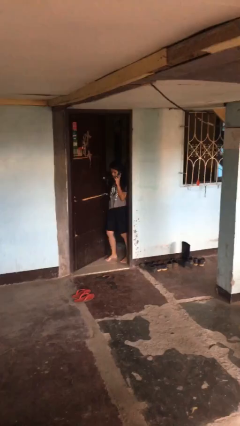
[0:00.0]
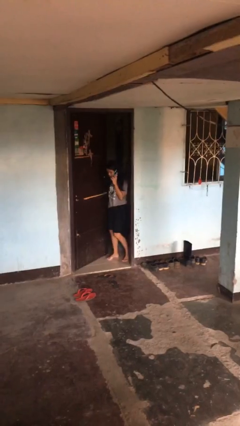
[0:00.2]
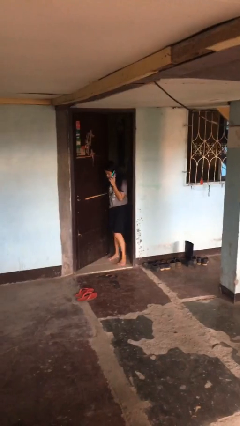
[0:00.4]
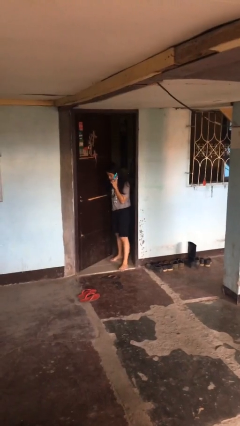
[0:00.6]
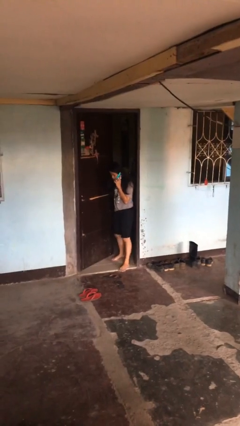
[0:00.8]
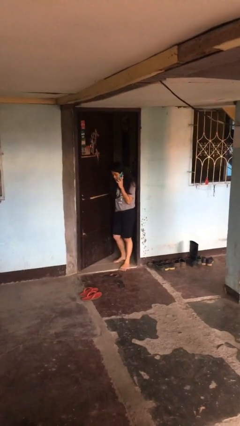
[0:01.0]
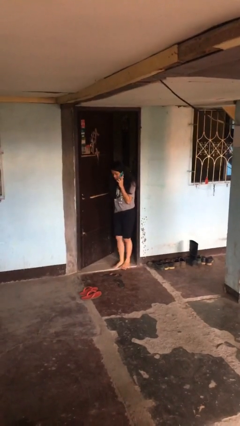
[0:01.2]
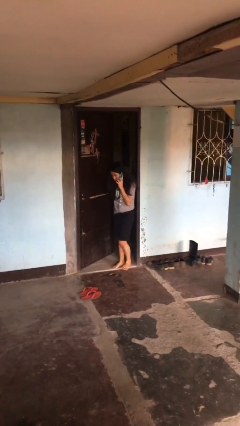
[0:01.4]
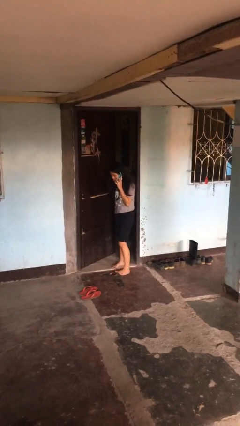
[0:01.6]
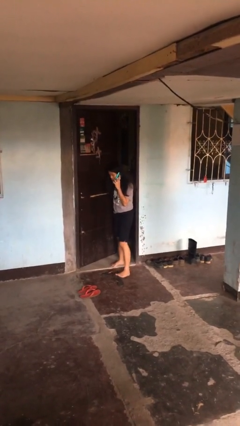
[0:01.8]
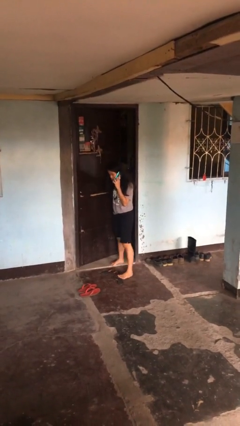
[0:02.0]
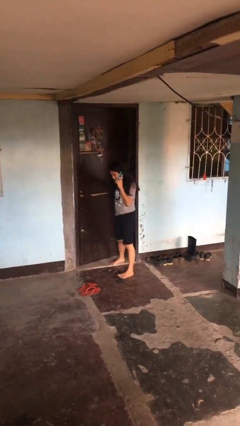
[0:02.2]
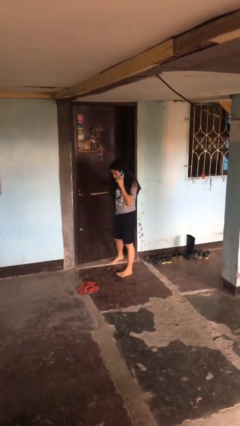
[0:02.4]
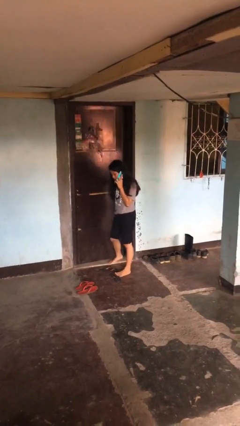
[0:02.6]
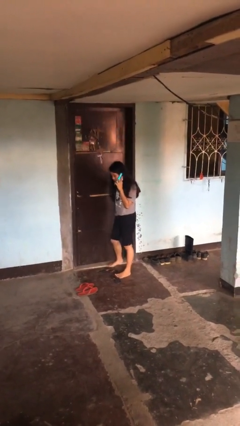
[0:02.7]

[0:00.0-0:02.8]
person enters scene through structure

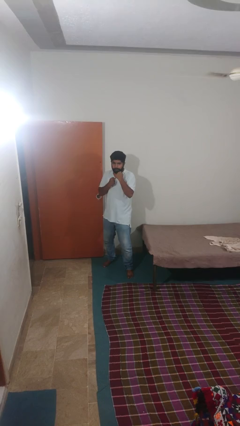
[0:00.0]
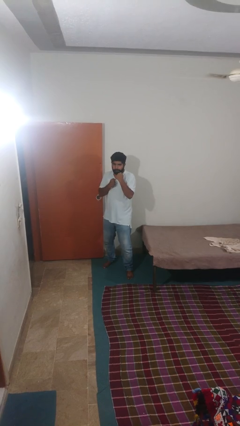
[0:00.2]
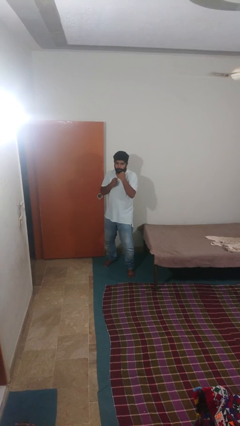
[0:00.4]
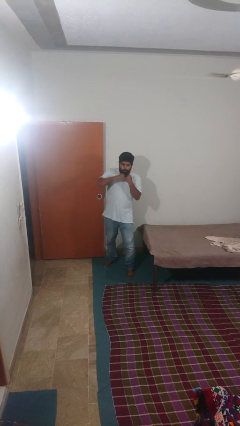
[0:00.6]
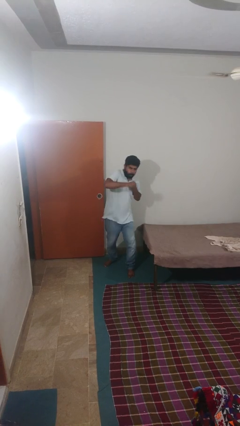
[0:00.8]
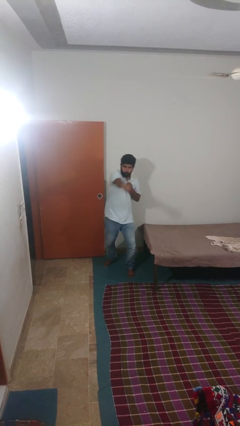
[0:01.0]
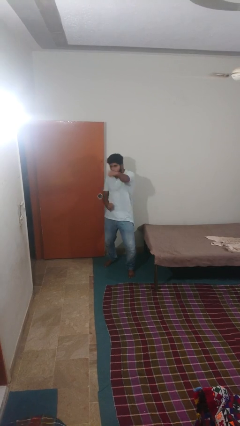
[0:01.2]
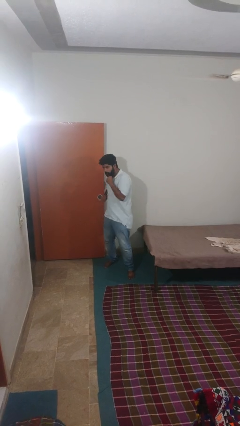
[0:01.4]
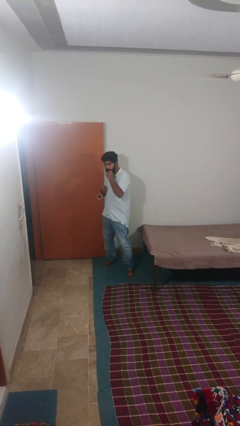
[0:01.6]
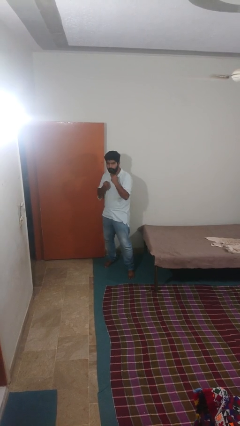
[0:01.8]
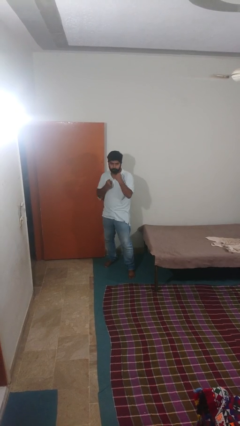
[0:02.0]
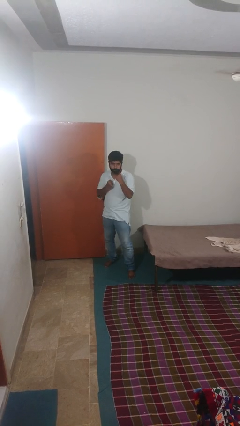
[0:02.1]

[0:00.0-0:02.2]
person punches

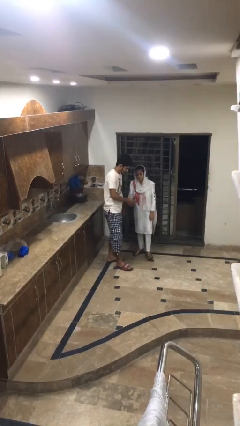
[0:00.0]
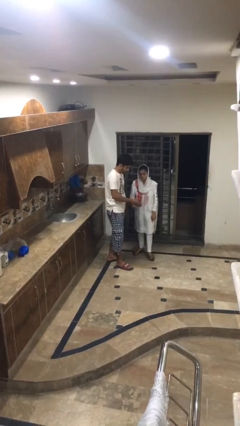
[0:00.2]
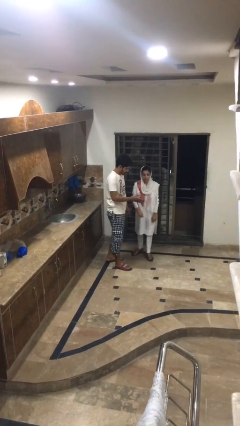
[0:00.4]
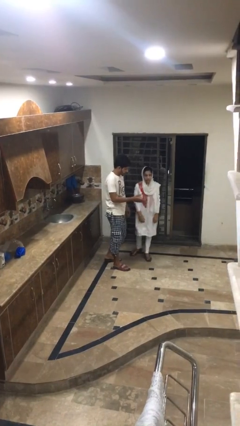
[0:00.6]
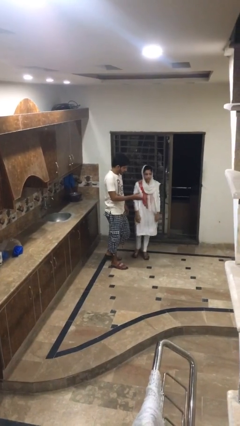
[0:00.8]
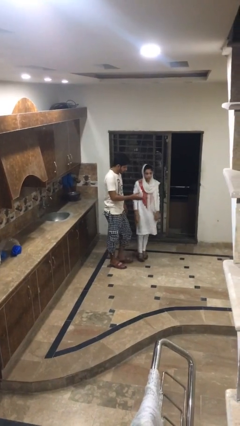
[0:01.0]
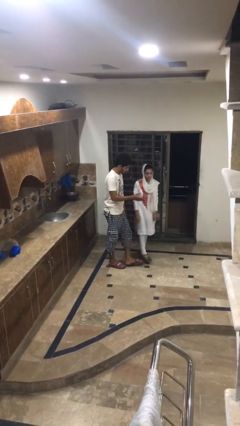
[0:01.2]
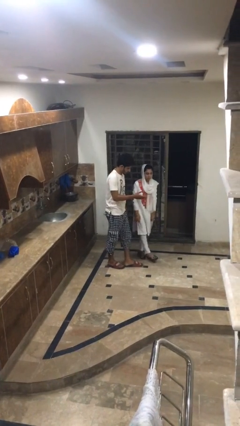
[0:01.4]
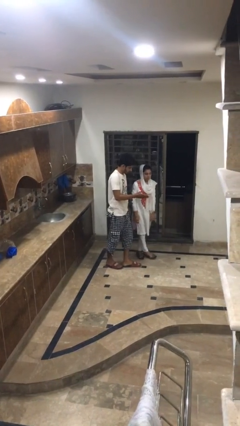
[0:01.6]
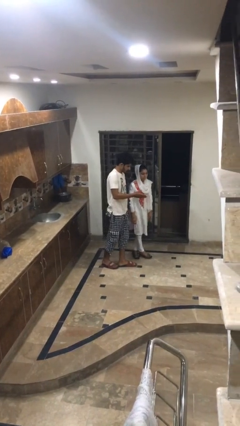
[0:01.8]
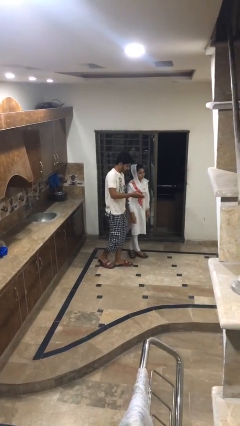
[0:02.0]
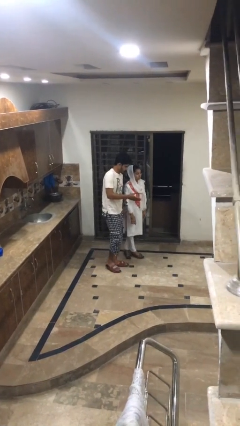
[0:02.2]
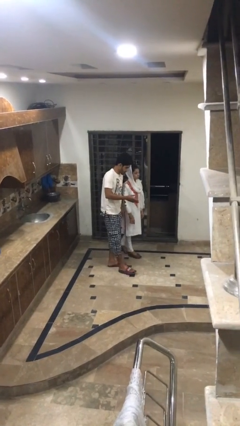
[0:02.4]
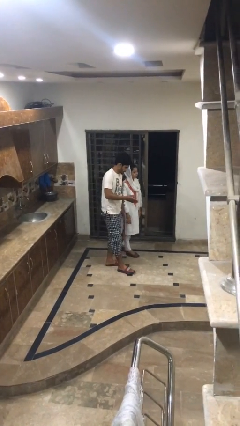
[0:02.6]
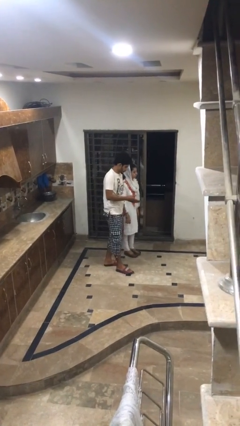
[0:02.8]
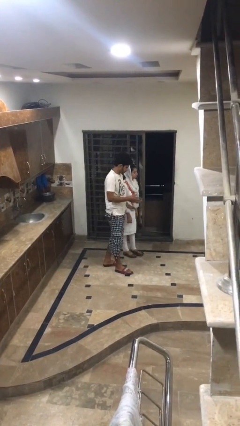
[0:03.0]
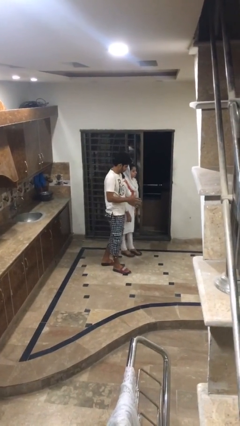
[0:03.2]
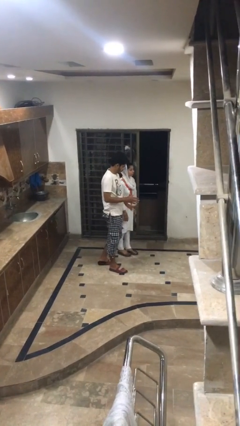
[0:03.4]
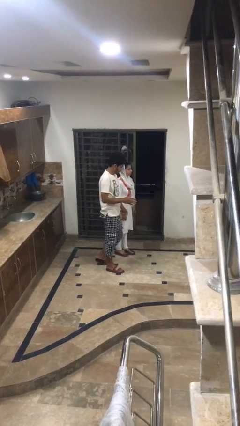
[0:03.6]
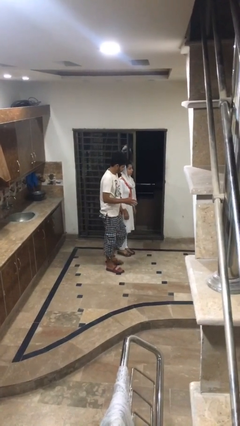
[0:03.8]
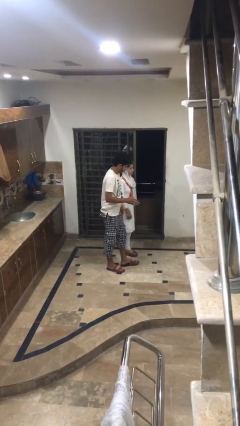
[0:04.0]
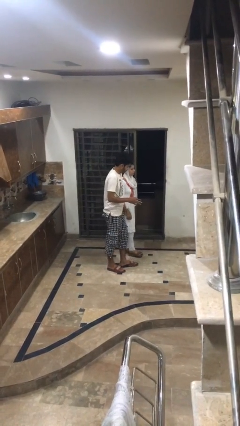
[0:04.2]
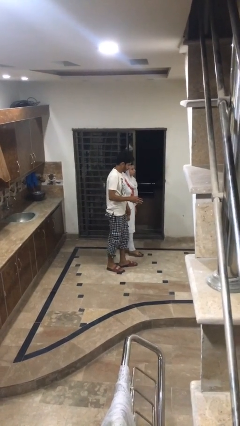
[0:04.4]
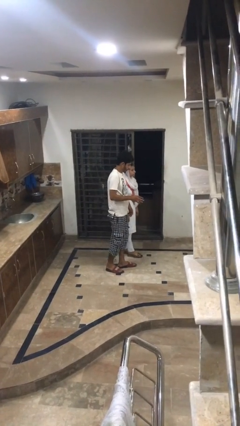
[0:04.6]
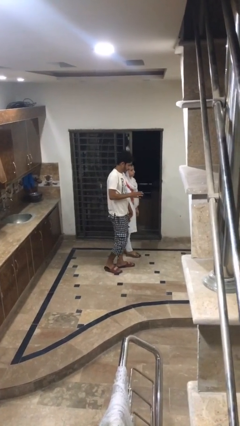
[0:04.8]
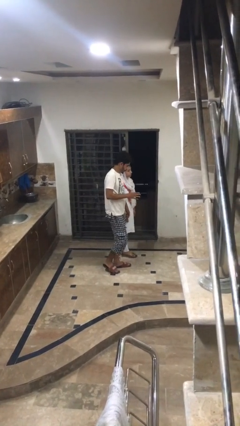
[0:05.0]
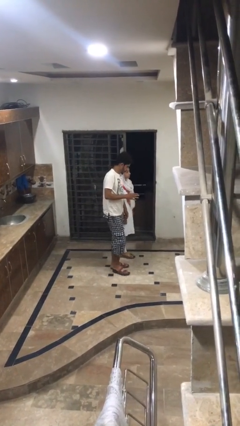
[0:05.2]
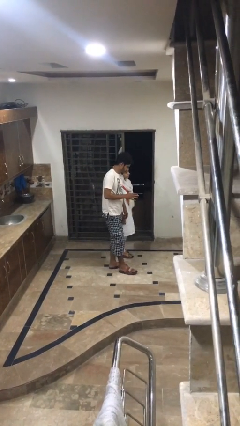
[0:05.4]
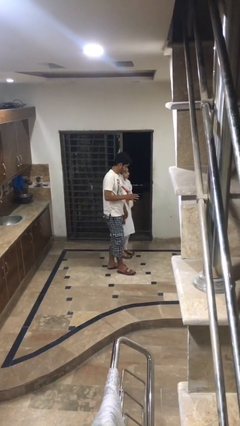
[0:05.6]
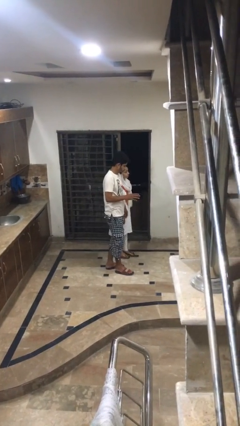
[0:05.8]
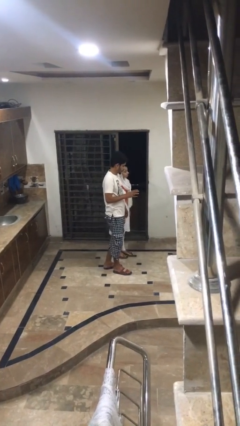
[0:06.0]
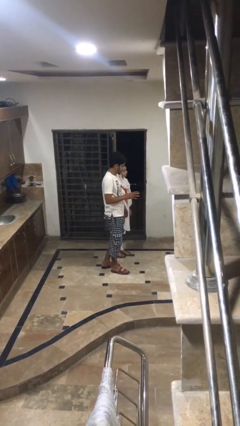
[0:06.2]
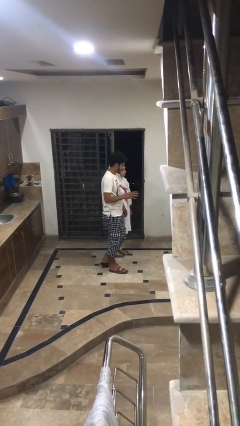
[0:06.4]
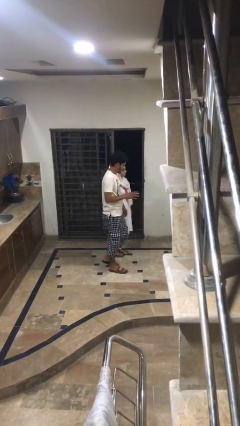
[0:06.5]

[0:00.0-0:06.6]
person talks to person

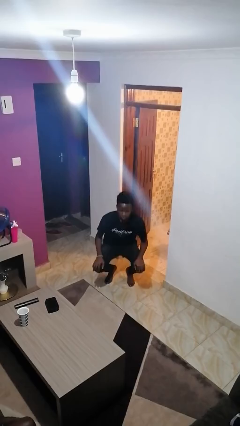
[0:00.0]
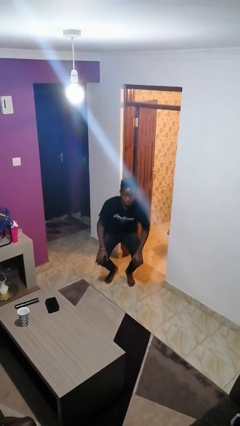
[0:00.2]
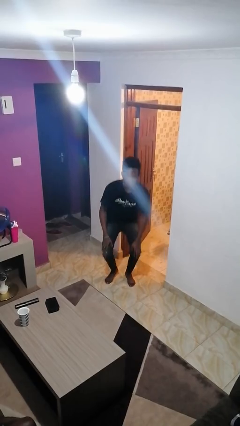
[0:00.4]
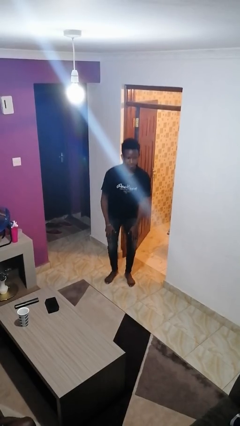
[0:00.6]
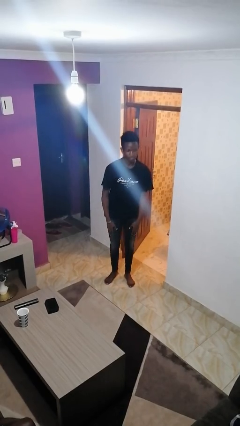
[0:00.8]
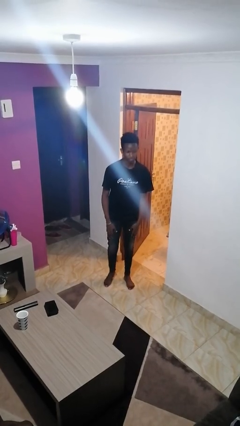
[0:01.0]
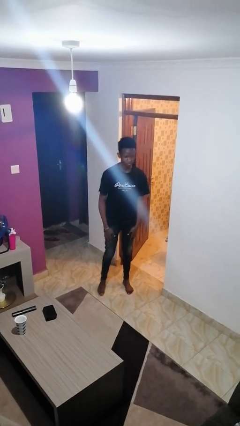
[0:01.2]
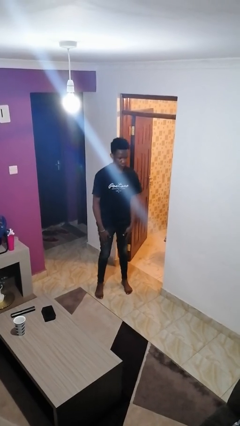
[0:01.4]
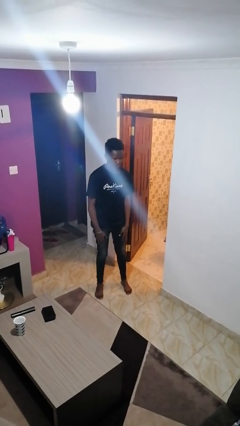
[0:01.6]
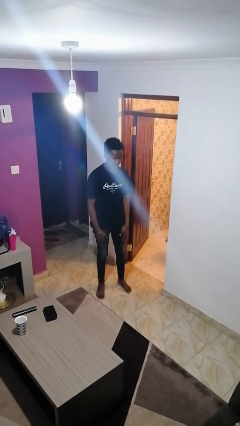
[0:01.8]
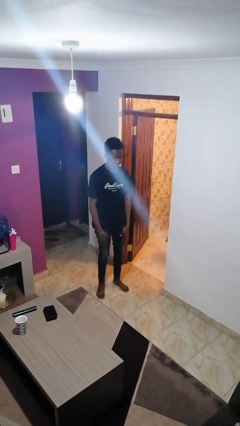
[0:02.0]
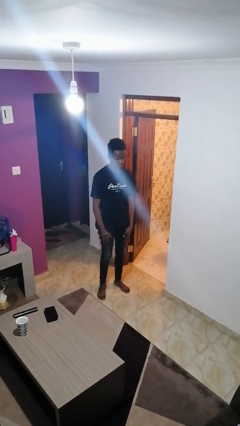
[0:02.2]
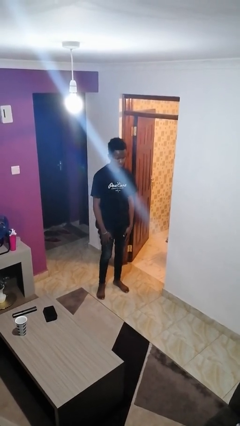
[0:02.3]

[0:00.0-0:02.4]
person stands up

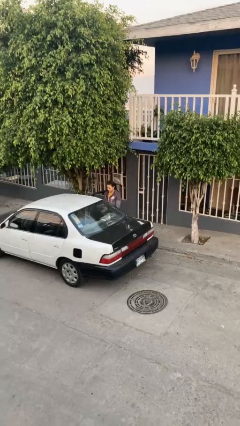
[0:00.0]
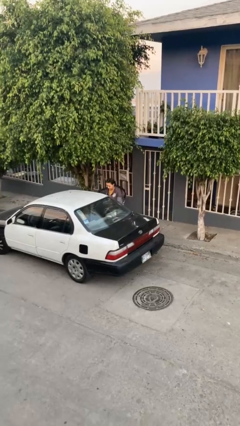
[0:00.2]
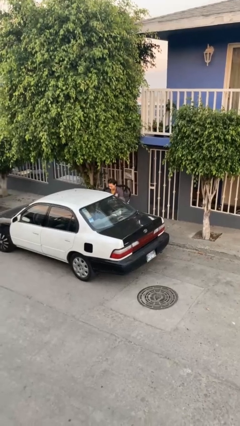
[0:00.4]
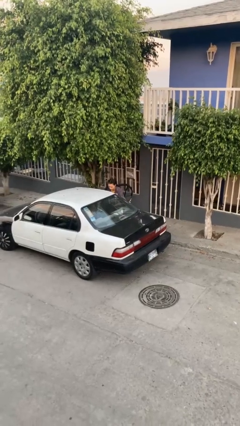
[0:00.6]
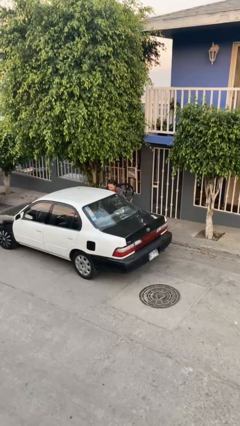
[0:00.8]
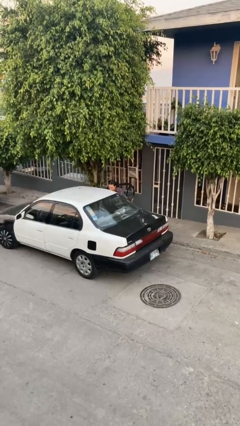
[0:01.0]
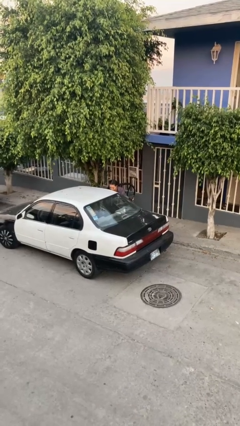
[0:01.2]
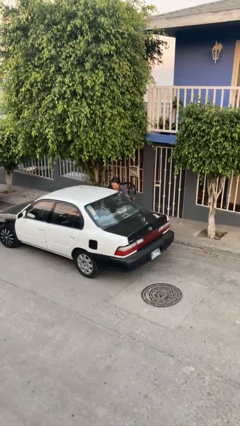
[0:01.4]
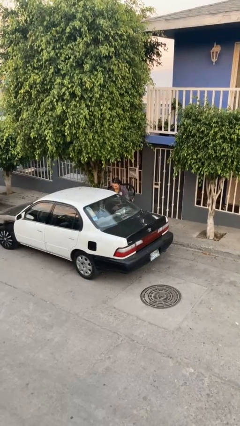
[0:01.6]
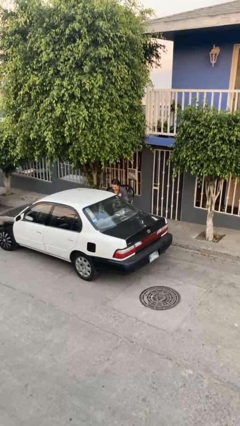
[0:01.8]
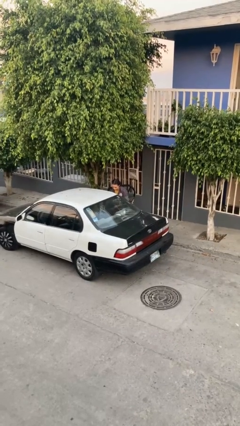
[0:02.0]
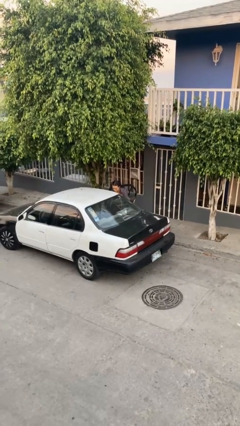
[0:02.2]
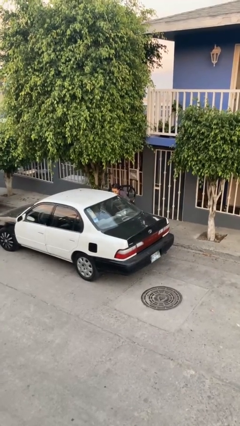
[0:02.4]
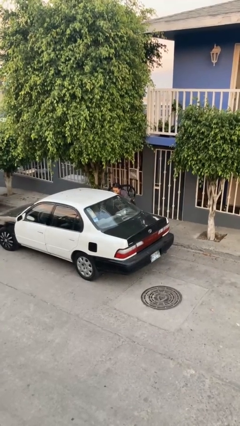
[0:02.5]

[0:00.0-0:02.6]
person loads car

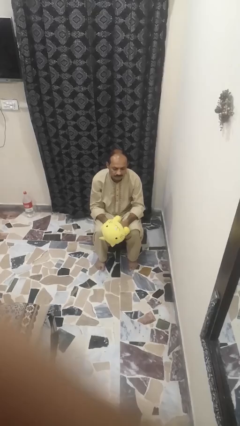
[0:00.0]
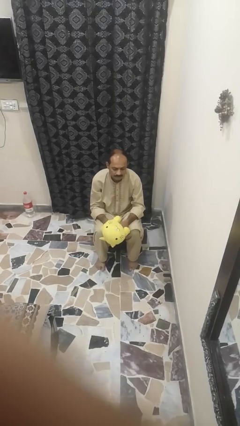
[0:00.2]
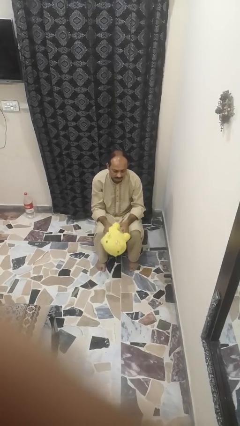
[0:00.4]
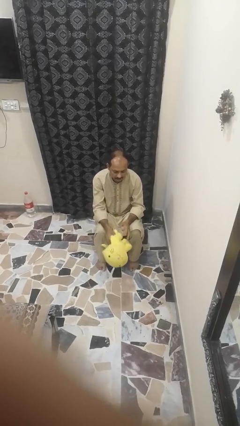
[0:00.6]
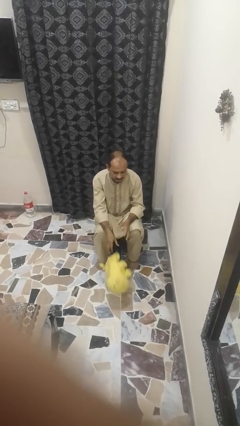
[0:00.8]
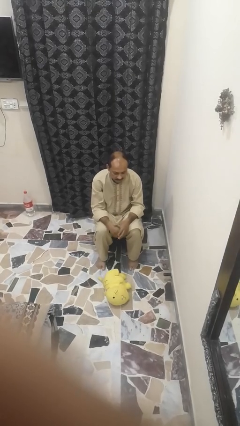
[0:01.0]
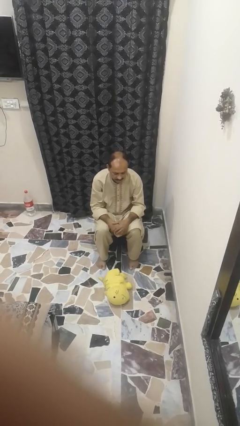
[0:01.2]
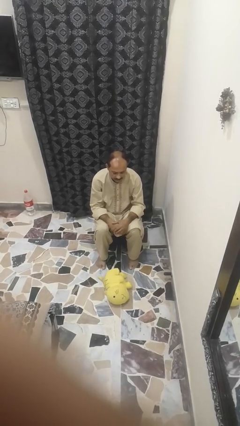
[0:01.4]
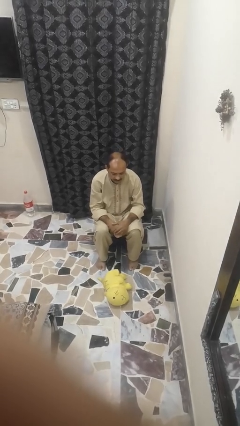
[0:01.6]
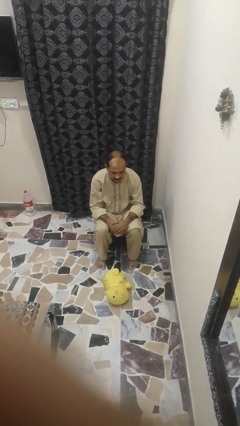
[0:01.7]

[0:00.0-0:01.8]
person drops object
